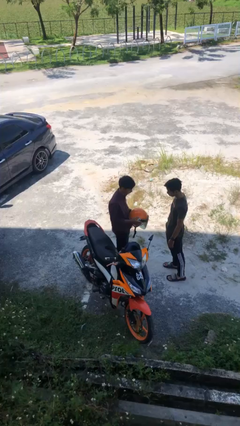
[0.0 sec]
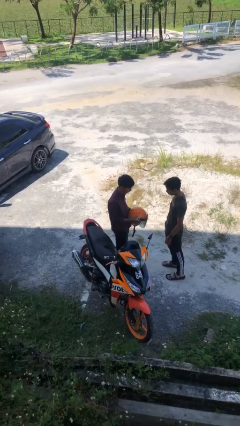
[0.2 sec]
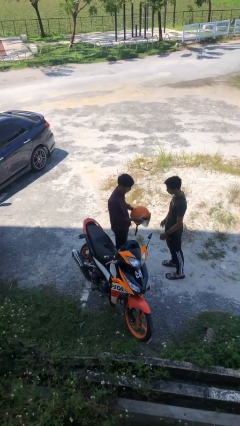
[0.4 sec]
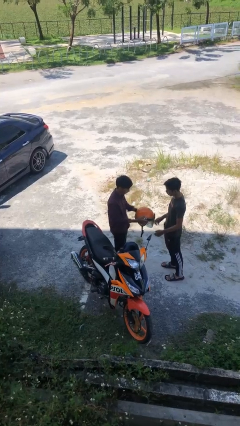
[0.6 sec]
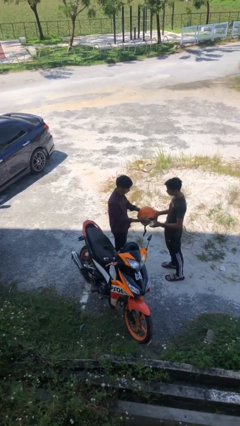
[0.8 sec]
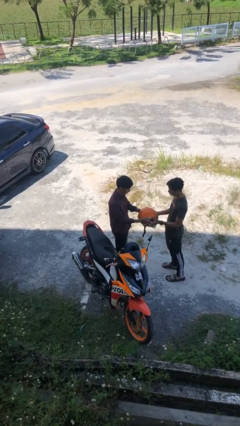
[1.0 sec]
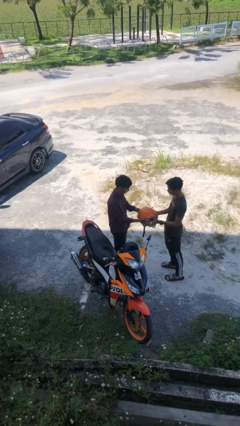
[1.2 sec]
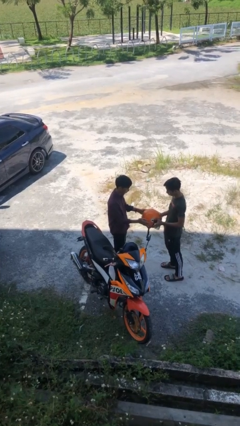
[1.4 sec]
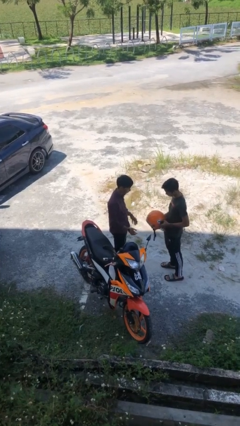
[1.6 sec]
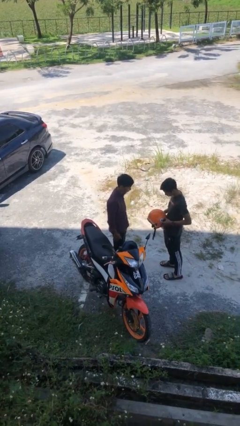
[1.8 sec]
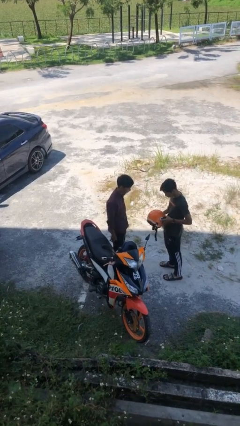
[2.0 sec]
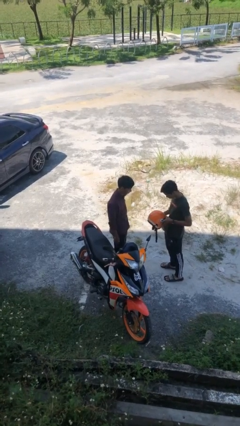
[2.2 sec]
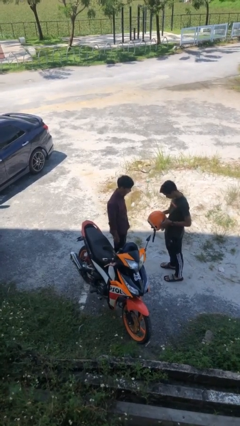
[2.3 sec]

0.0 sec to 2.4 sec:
person transfers object to person

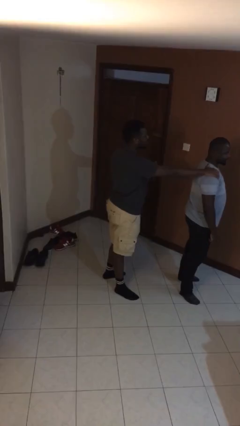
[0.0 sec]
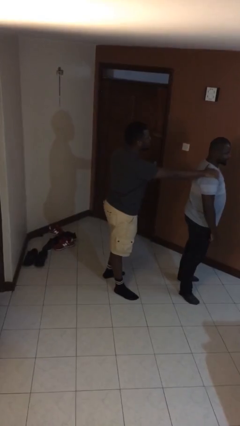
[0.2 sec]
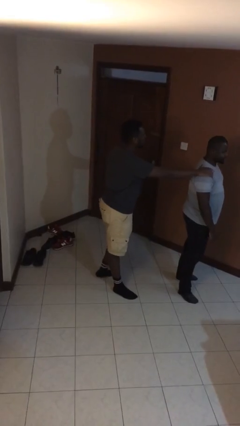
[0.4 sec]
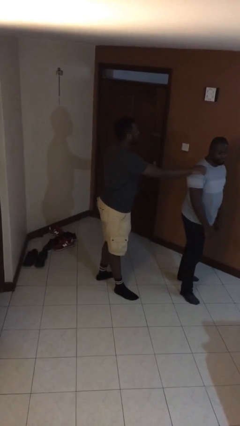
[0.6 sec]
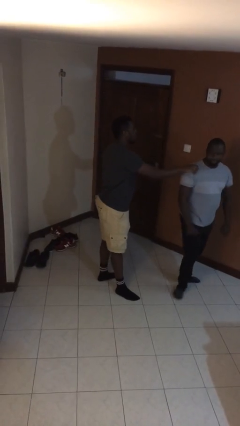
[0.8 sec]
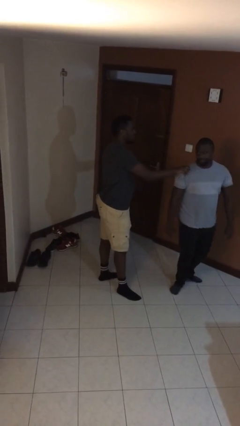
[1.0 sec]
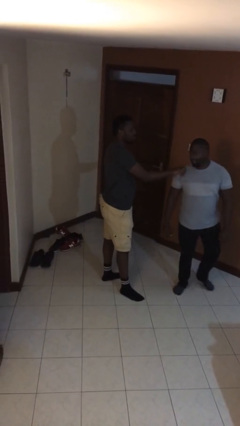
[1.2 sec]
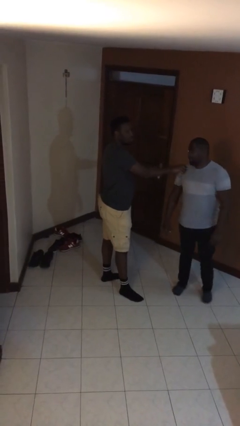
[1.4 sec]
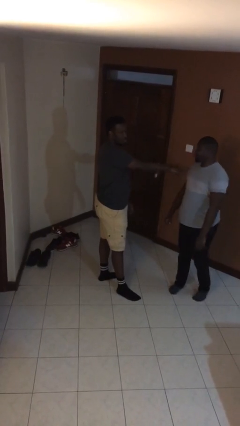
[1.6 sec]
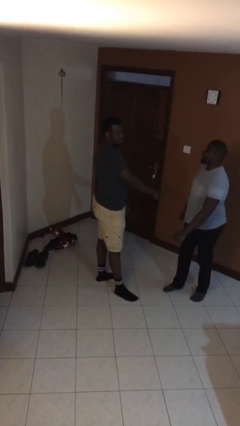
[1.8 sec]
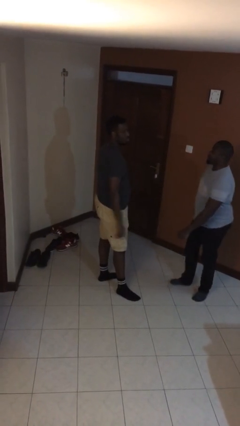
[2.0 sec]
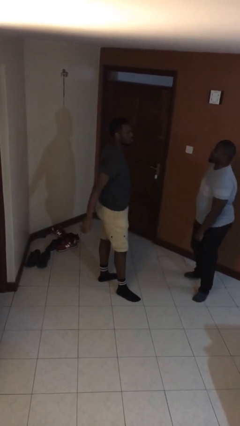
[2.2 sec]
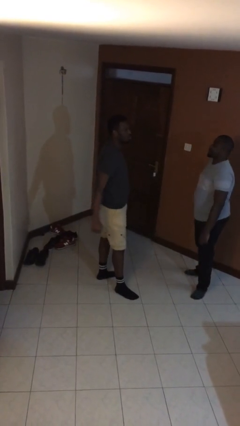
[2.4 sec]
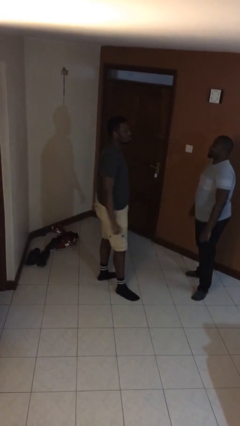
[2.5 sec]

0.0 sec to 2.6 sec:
person spins person around

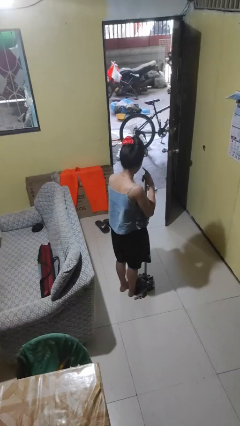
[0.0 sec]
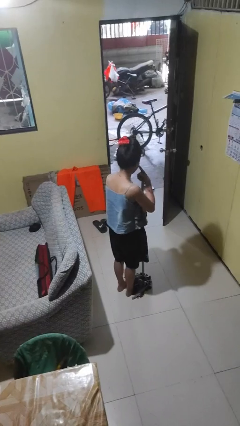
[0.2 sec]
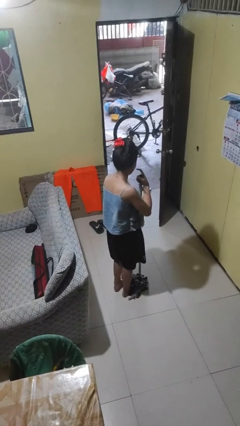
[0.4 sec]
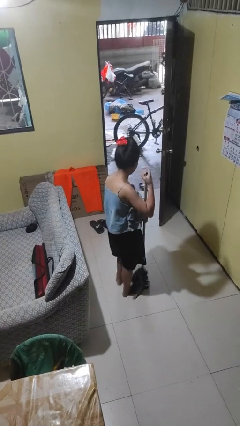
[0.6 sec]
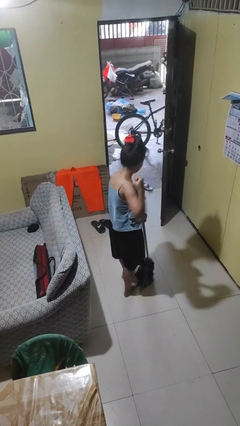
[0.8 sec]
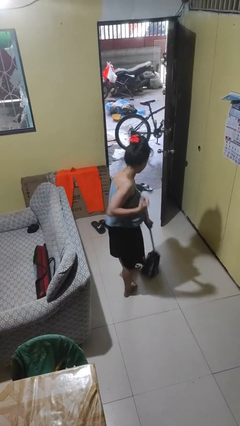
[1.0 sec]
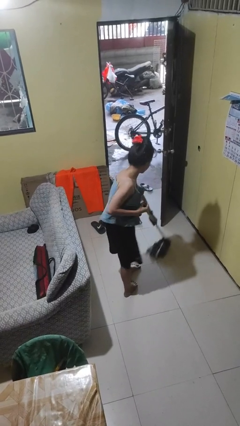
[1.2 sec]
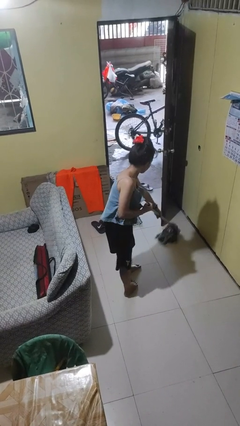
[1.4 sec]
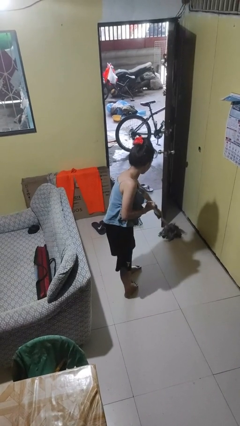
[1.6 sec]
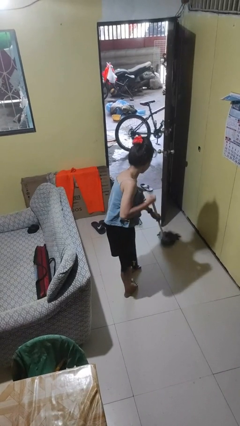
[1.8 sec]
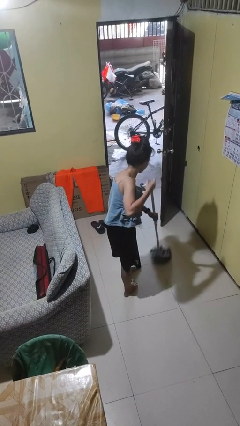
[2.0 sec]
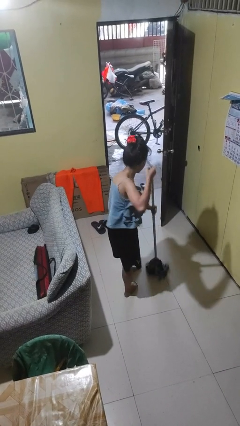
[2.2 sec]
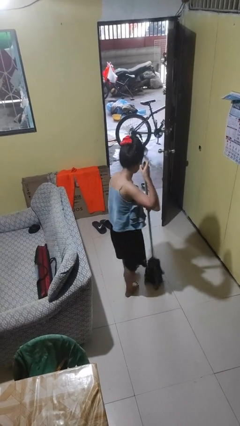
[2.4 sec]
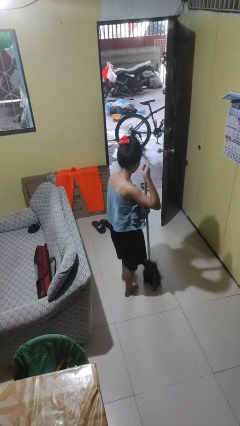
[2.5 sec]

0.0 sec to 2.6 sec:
person mops

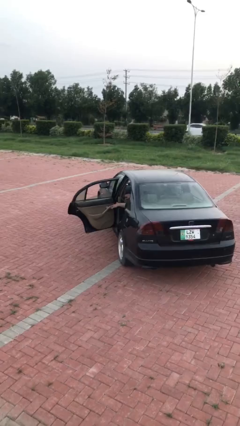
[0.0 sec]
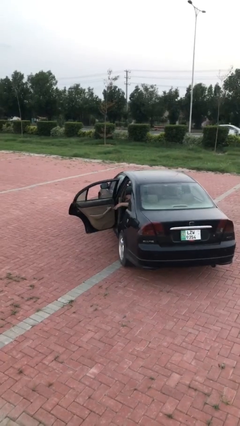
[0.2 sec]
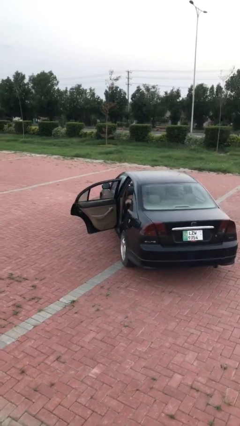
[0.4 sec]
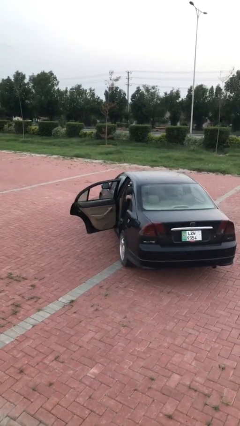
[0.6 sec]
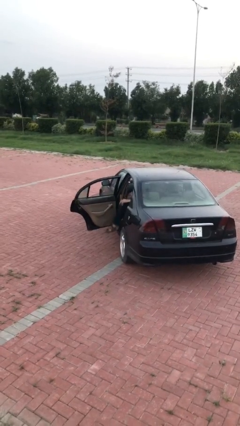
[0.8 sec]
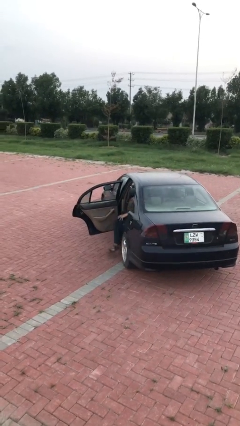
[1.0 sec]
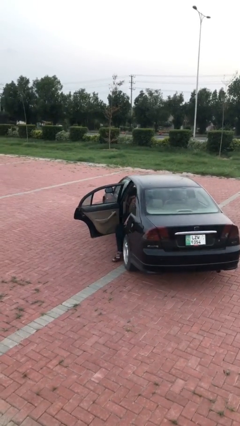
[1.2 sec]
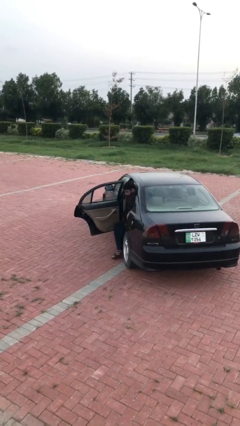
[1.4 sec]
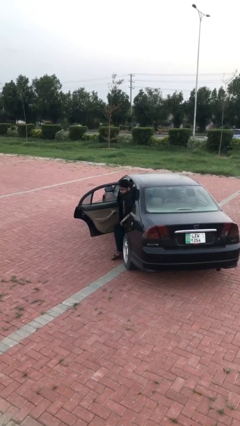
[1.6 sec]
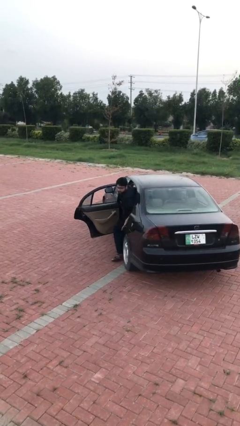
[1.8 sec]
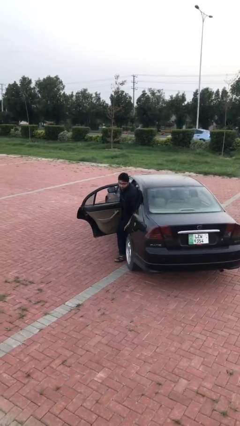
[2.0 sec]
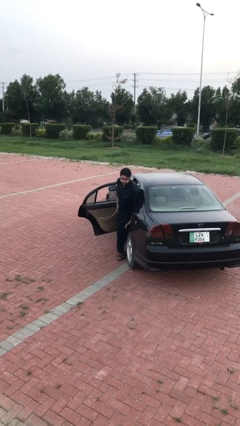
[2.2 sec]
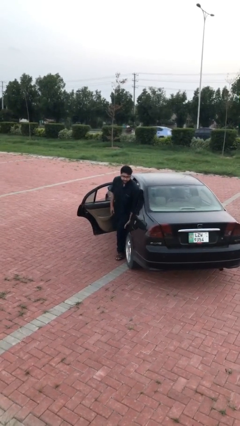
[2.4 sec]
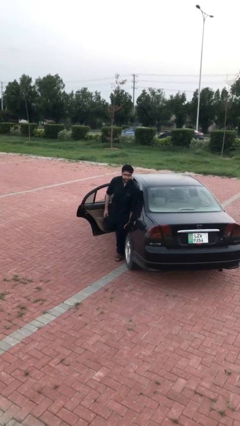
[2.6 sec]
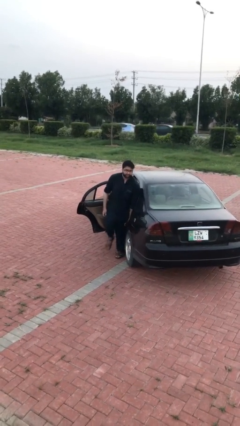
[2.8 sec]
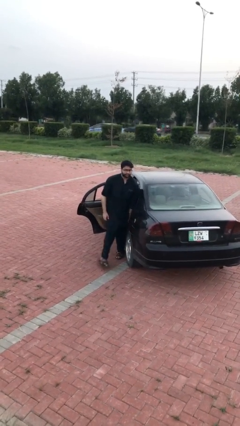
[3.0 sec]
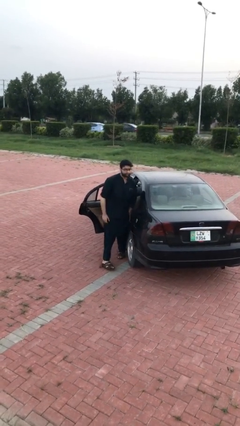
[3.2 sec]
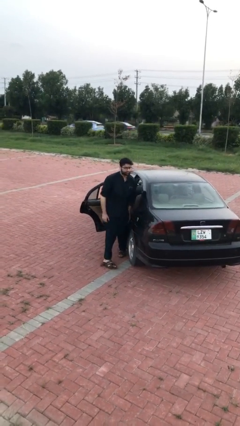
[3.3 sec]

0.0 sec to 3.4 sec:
person exits car

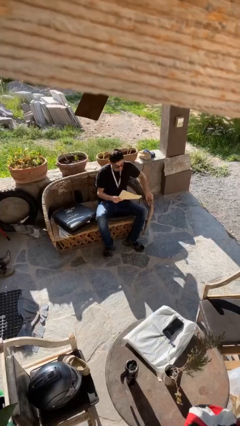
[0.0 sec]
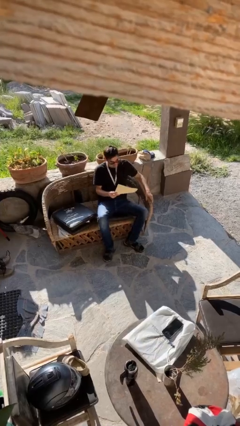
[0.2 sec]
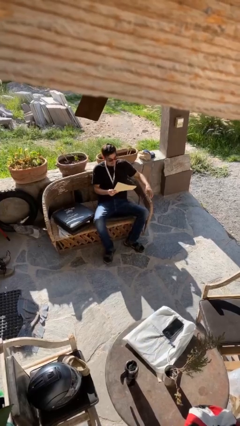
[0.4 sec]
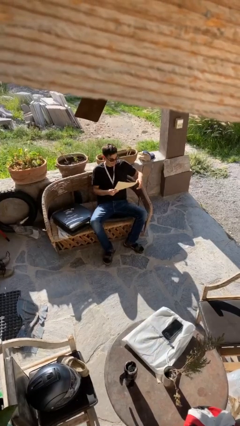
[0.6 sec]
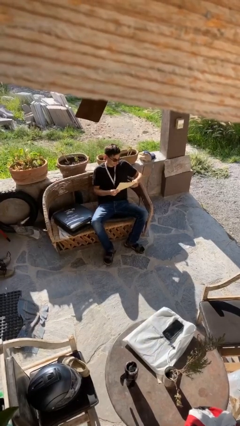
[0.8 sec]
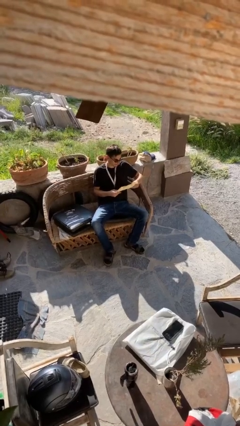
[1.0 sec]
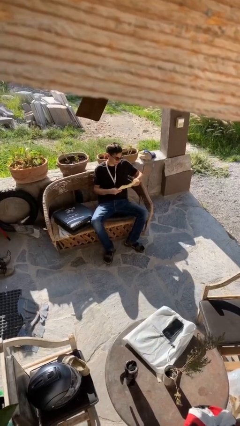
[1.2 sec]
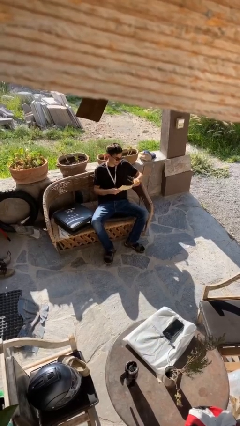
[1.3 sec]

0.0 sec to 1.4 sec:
person sits down

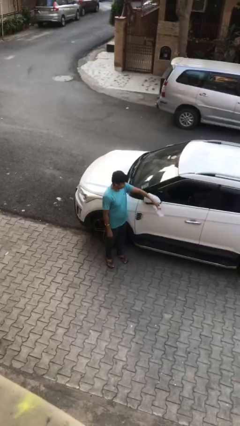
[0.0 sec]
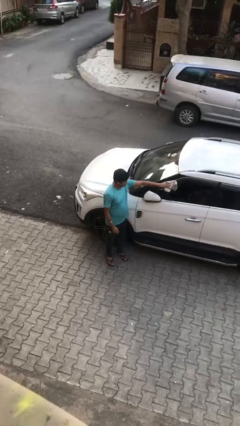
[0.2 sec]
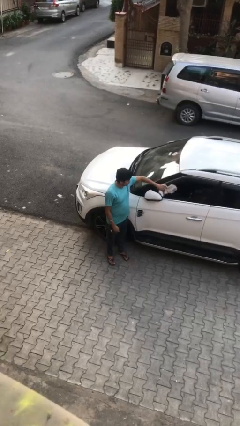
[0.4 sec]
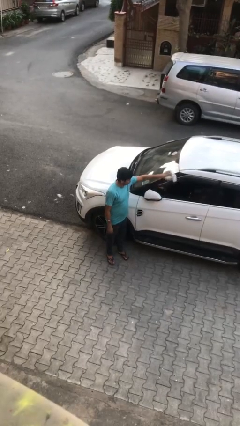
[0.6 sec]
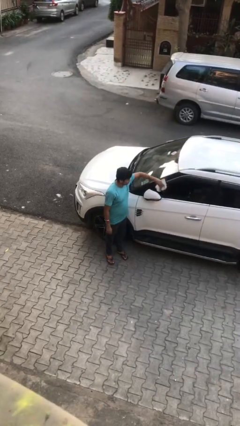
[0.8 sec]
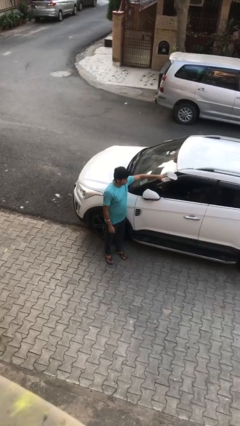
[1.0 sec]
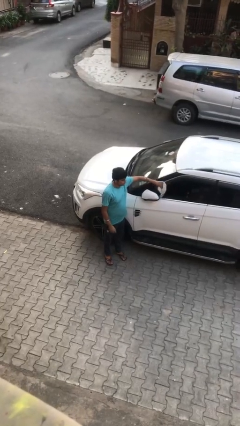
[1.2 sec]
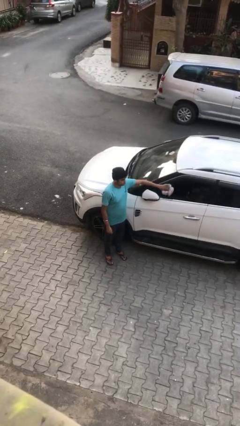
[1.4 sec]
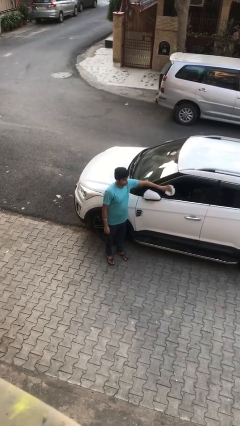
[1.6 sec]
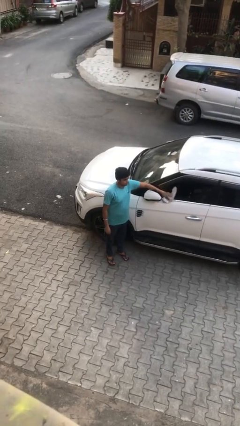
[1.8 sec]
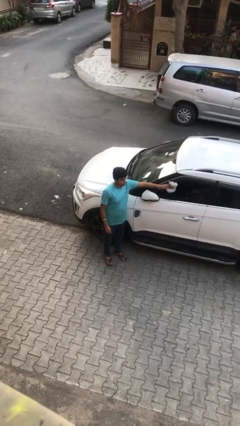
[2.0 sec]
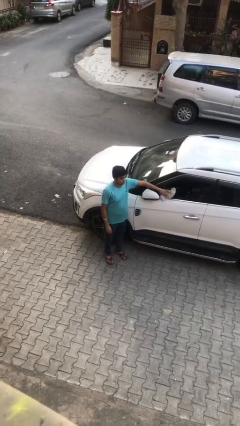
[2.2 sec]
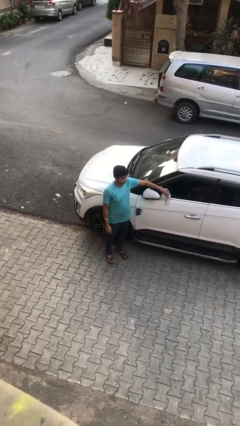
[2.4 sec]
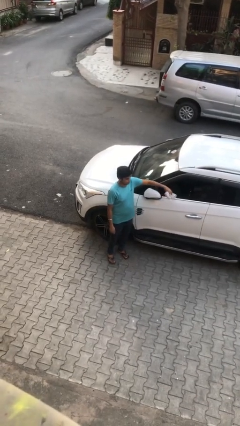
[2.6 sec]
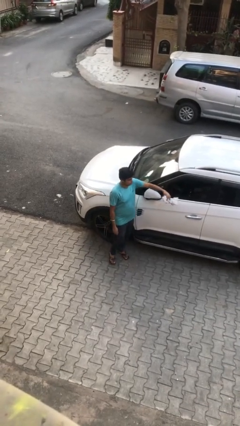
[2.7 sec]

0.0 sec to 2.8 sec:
person polishes car with rag

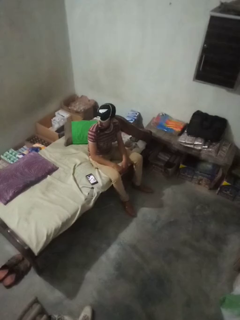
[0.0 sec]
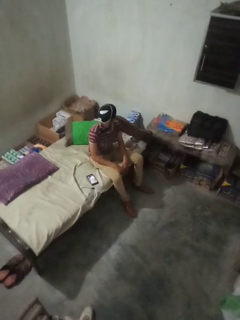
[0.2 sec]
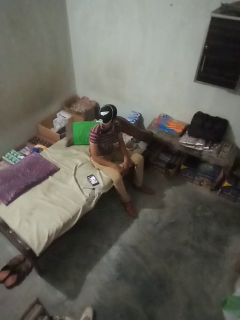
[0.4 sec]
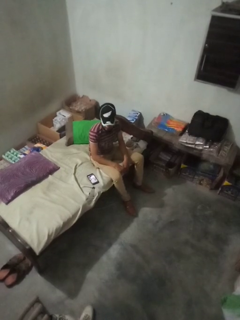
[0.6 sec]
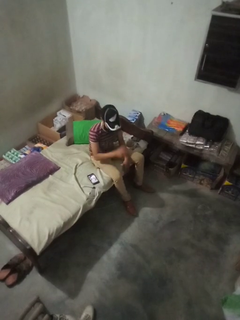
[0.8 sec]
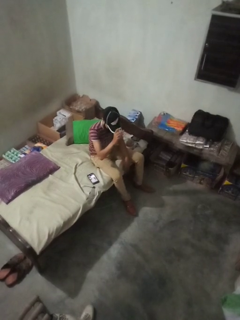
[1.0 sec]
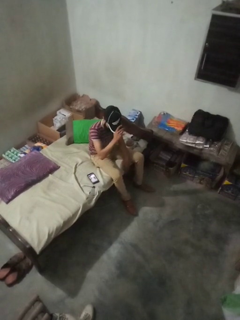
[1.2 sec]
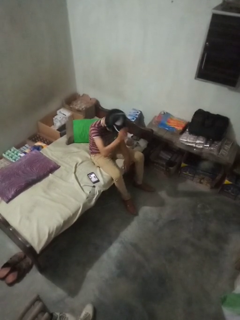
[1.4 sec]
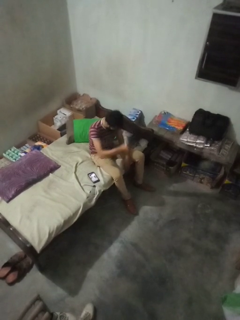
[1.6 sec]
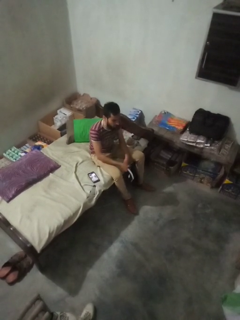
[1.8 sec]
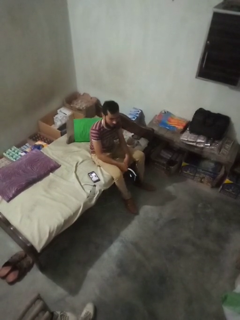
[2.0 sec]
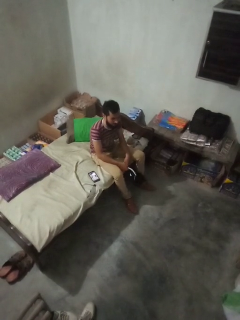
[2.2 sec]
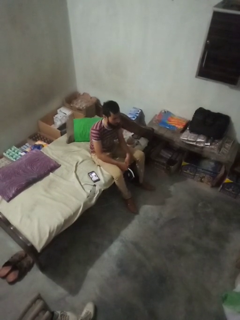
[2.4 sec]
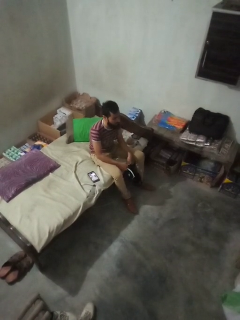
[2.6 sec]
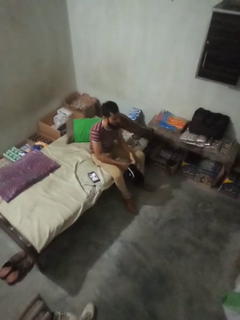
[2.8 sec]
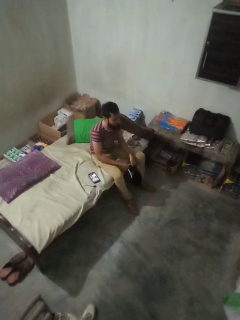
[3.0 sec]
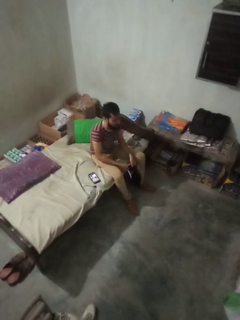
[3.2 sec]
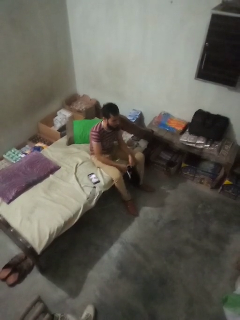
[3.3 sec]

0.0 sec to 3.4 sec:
person takes off hat
